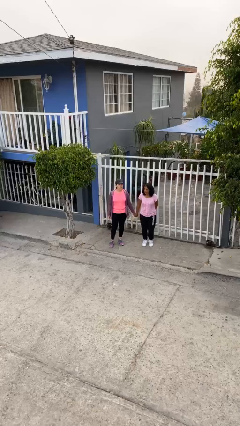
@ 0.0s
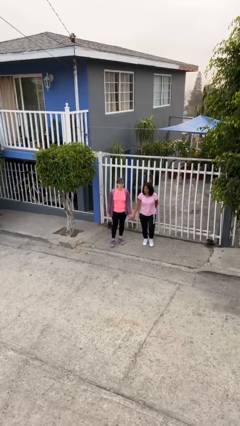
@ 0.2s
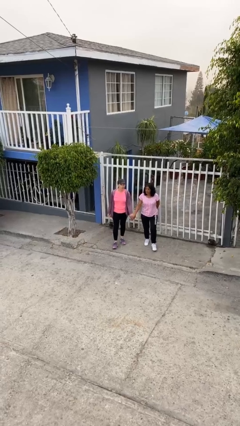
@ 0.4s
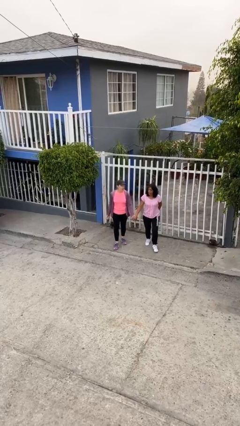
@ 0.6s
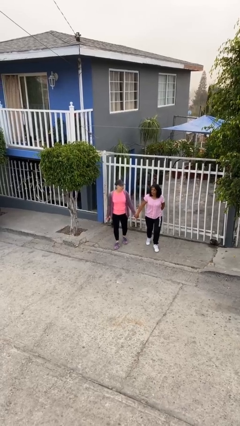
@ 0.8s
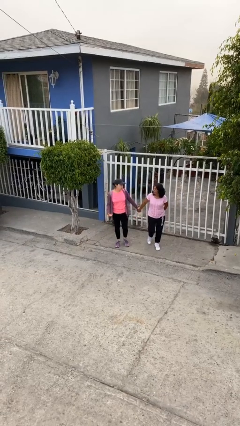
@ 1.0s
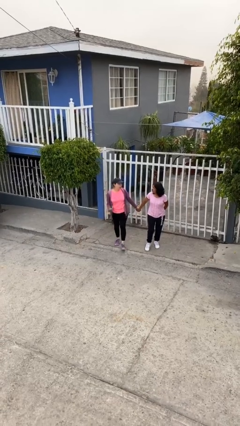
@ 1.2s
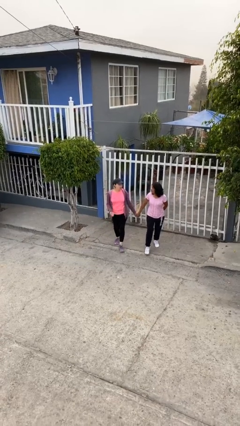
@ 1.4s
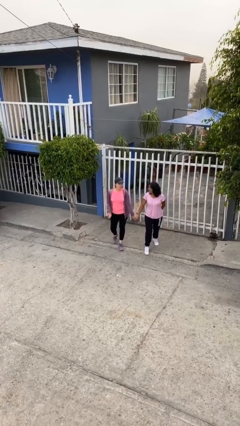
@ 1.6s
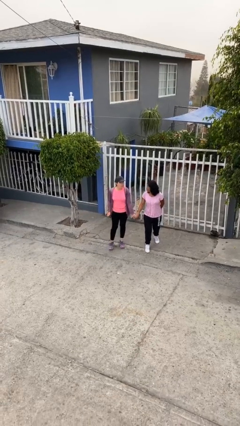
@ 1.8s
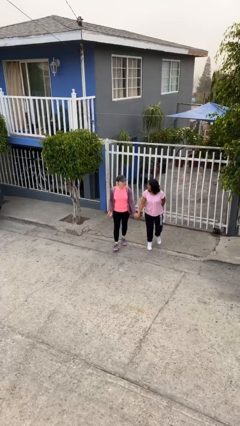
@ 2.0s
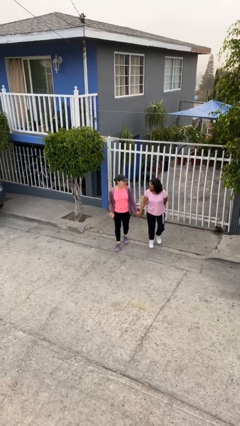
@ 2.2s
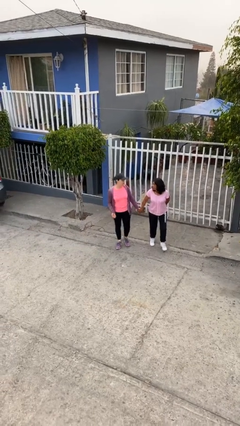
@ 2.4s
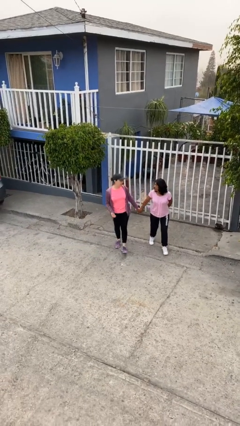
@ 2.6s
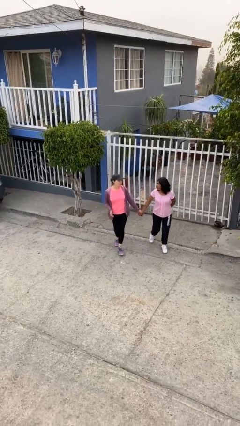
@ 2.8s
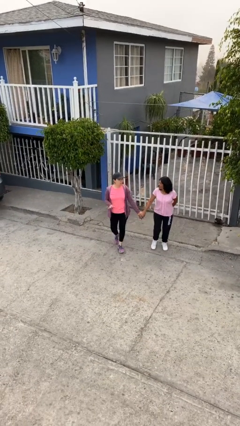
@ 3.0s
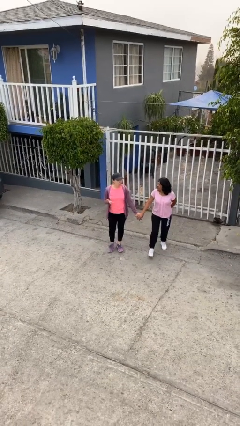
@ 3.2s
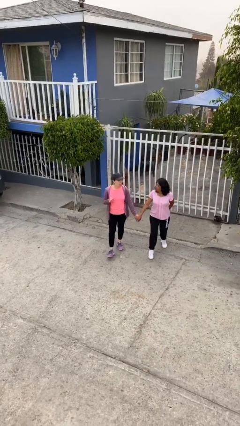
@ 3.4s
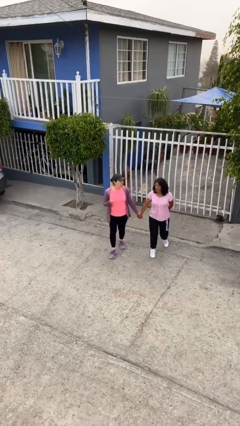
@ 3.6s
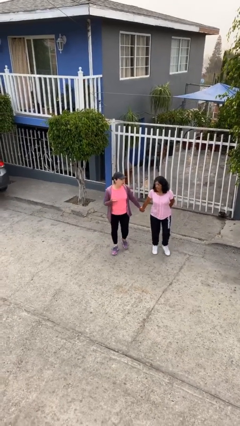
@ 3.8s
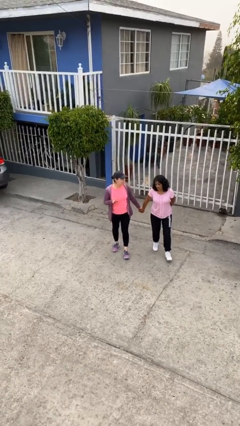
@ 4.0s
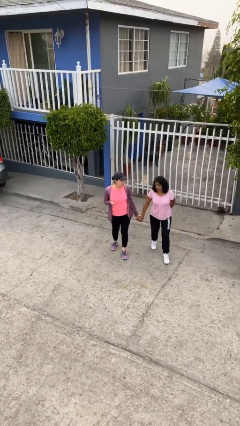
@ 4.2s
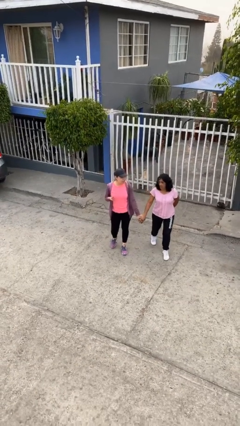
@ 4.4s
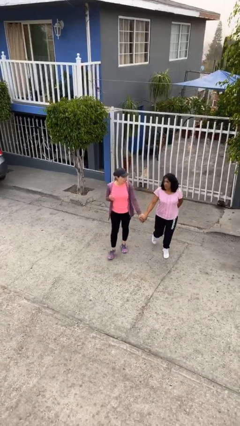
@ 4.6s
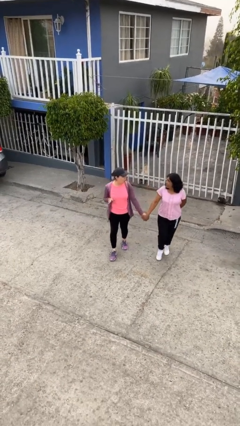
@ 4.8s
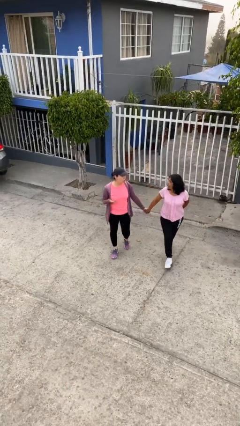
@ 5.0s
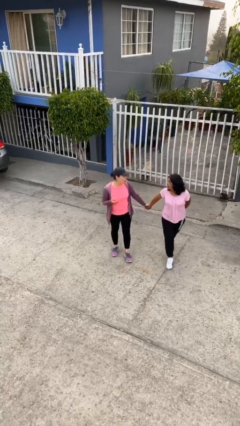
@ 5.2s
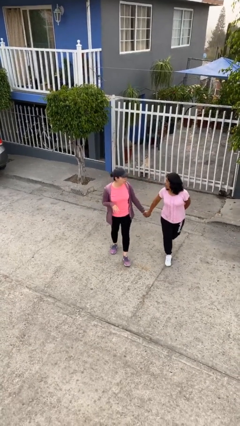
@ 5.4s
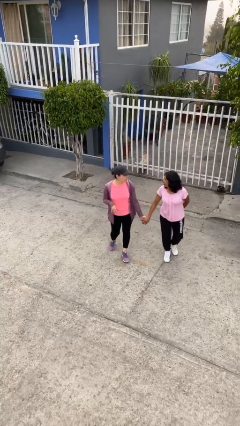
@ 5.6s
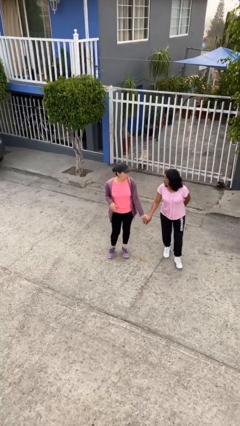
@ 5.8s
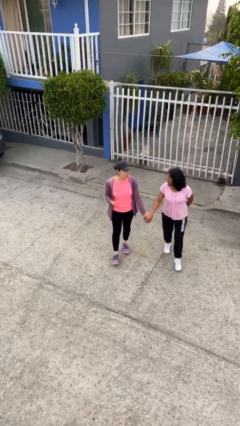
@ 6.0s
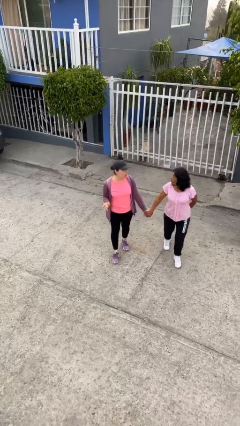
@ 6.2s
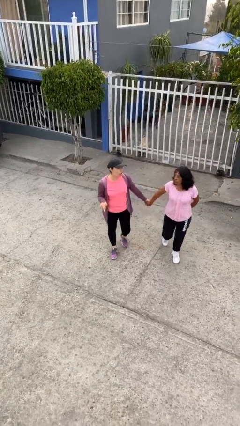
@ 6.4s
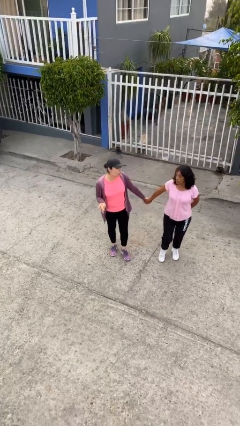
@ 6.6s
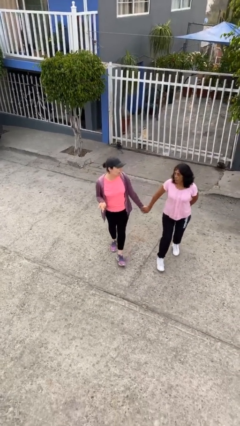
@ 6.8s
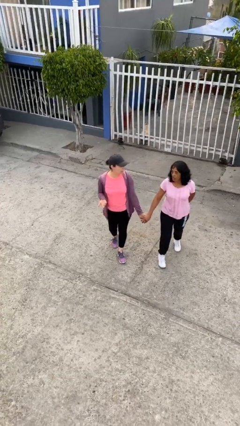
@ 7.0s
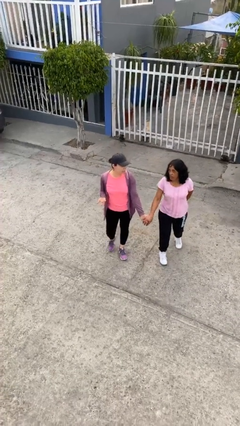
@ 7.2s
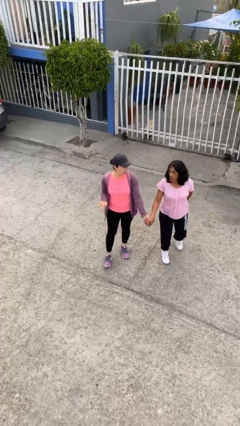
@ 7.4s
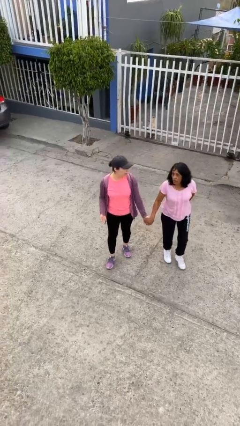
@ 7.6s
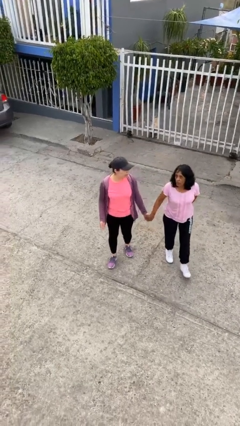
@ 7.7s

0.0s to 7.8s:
person holds hand

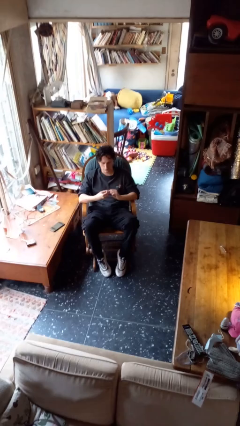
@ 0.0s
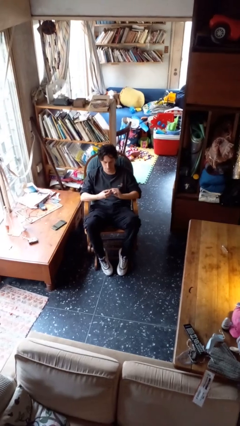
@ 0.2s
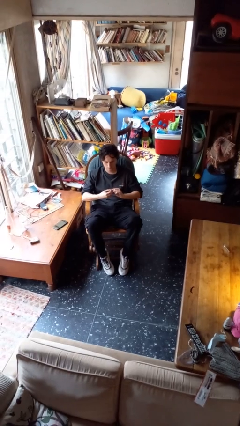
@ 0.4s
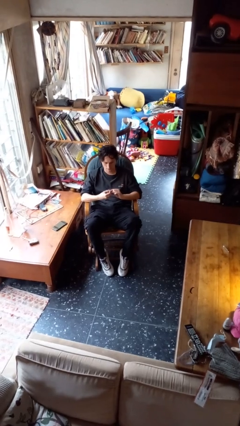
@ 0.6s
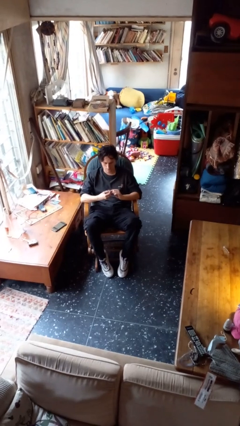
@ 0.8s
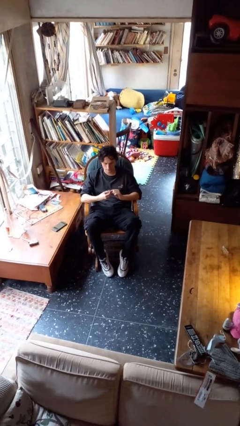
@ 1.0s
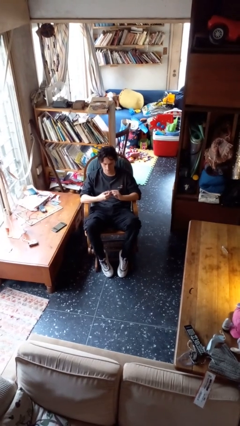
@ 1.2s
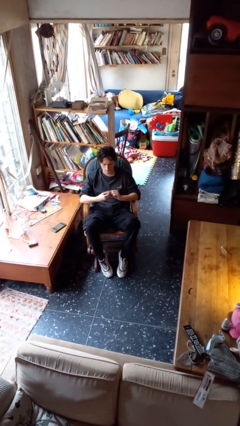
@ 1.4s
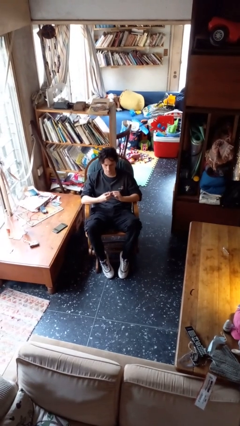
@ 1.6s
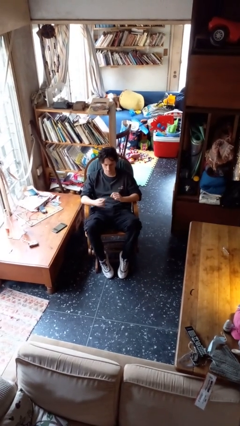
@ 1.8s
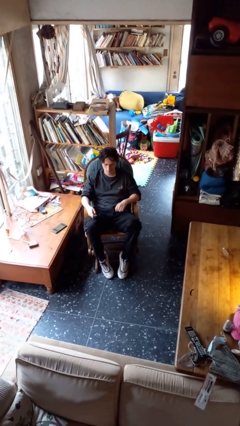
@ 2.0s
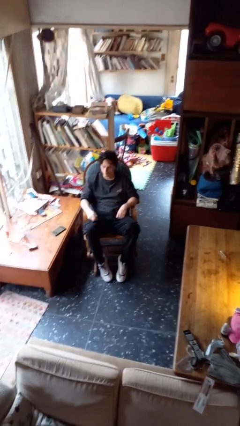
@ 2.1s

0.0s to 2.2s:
person files fingernails

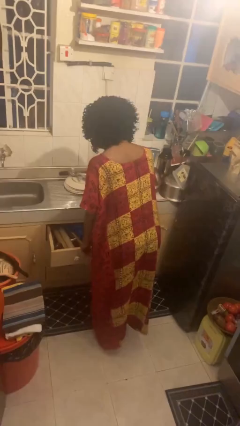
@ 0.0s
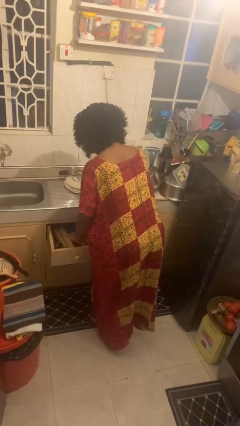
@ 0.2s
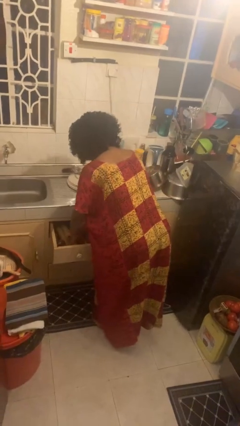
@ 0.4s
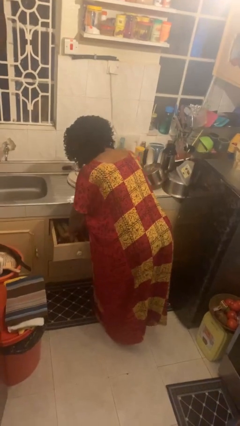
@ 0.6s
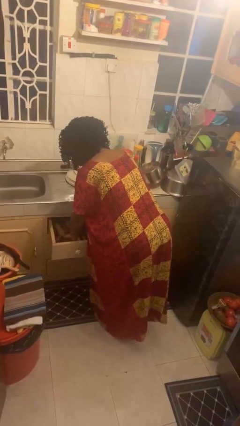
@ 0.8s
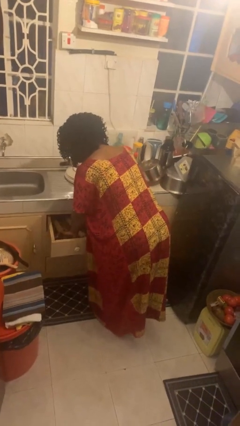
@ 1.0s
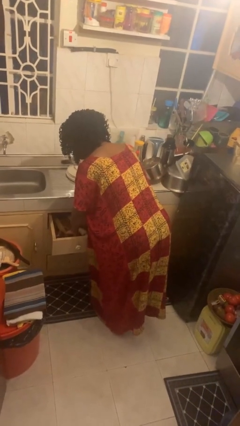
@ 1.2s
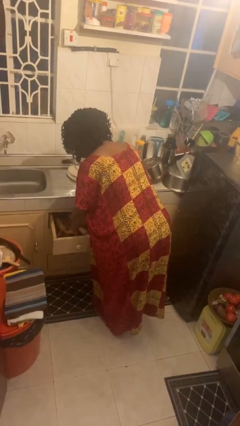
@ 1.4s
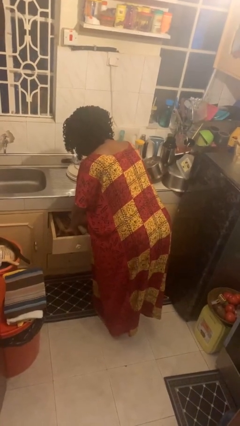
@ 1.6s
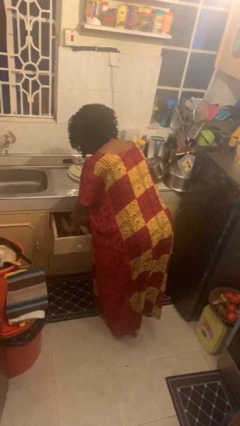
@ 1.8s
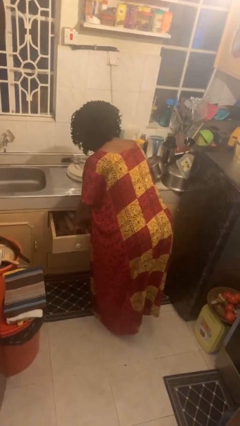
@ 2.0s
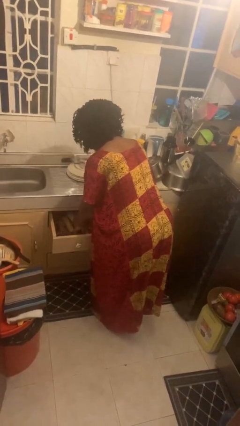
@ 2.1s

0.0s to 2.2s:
person searches in kitchen drawer

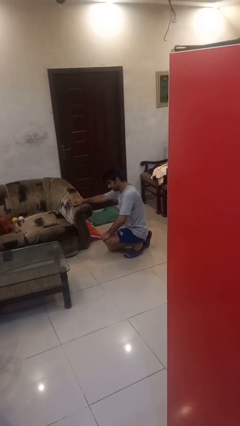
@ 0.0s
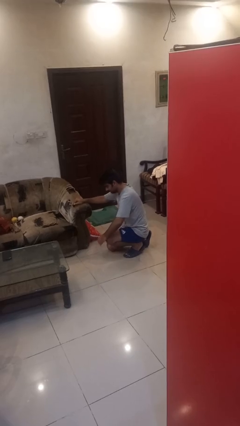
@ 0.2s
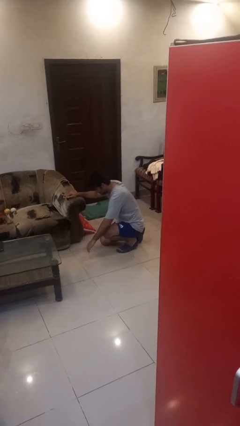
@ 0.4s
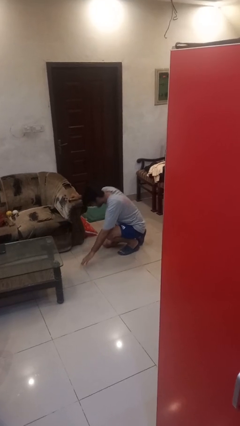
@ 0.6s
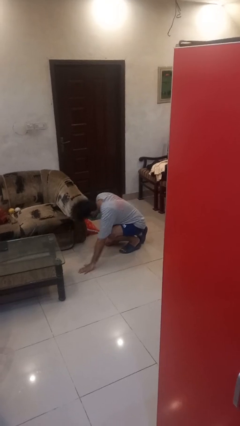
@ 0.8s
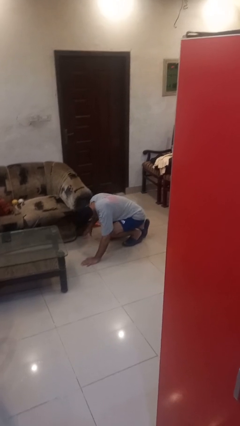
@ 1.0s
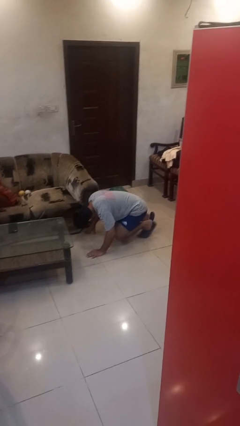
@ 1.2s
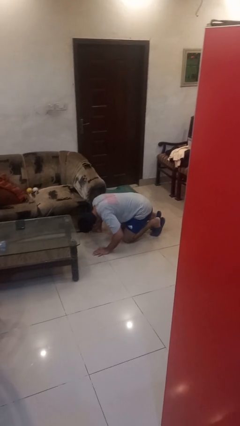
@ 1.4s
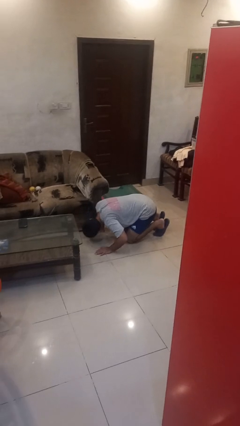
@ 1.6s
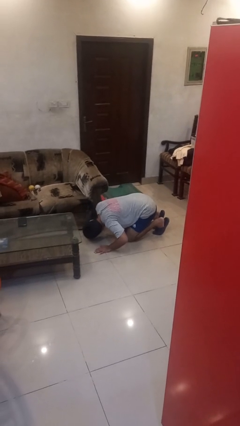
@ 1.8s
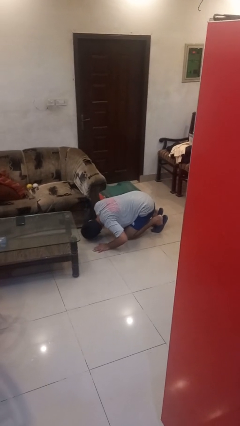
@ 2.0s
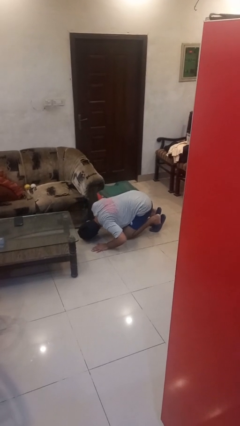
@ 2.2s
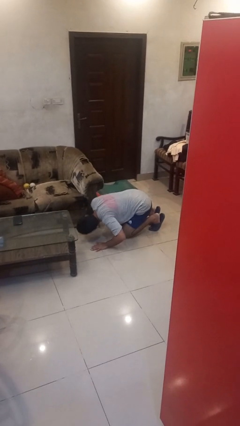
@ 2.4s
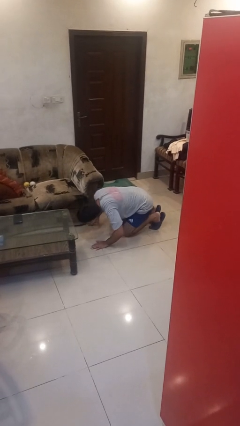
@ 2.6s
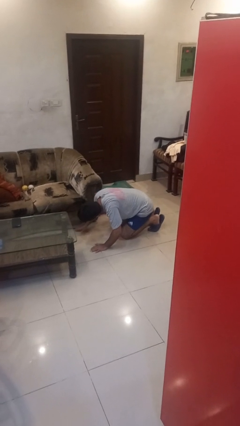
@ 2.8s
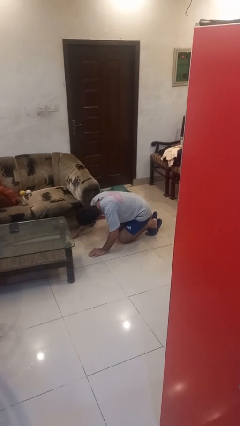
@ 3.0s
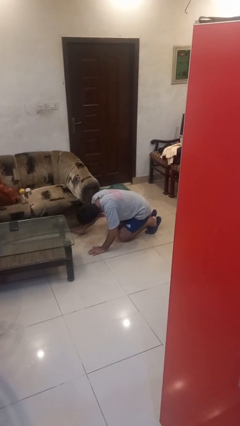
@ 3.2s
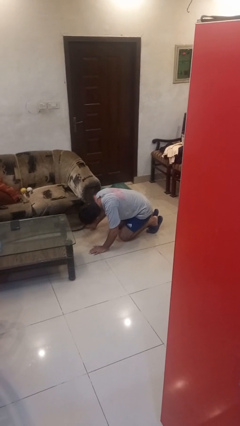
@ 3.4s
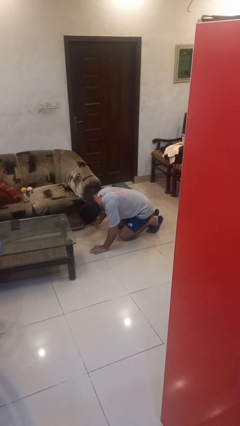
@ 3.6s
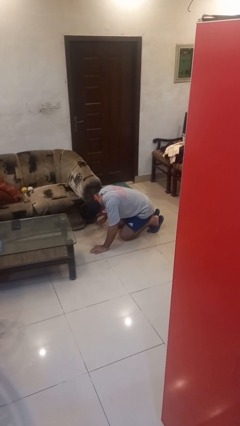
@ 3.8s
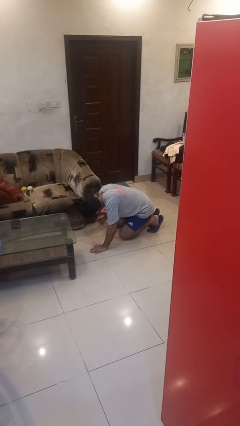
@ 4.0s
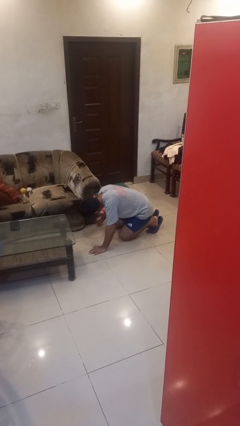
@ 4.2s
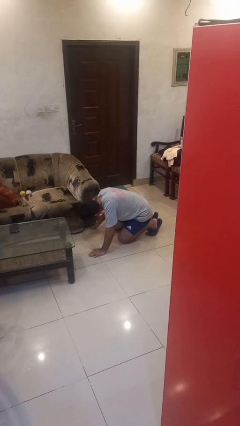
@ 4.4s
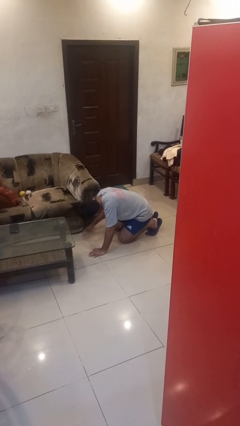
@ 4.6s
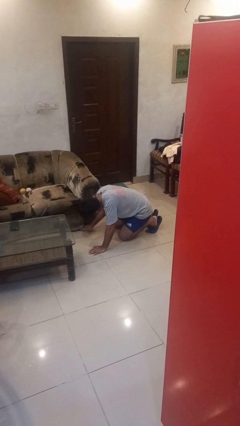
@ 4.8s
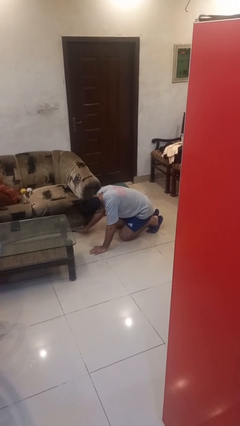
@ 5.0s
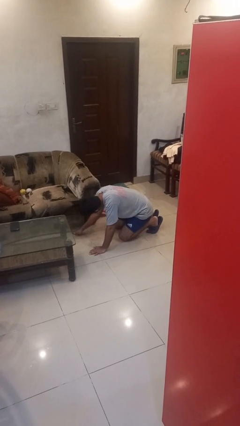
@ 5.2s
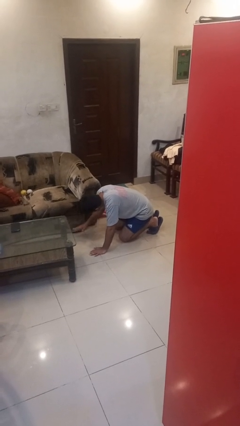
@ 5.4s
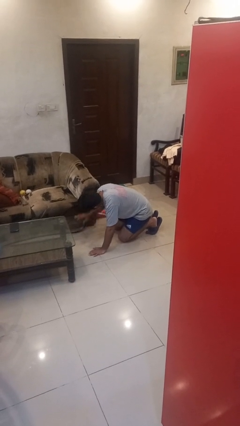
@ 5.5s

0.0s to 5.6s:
person searches under couch
